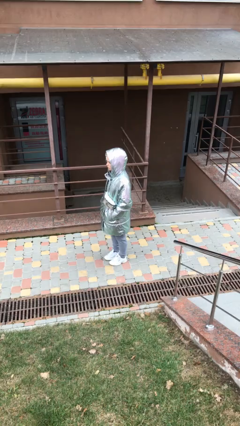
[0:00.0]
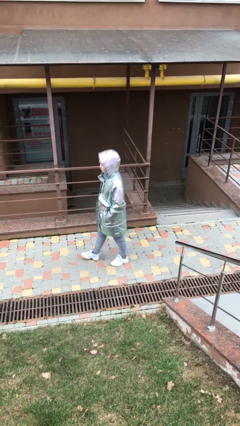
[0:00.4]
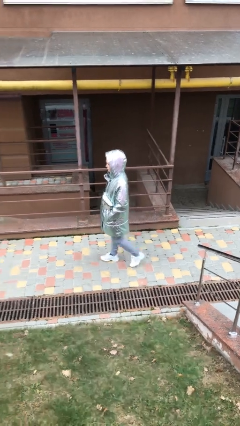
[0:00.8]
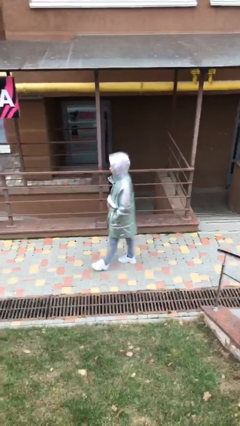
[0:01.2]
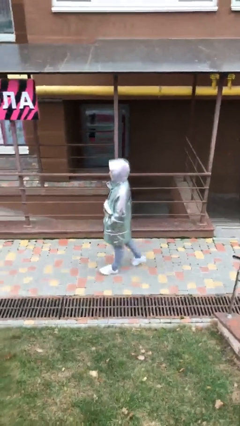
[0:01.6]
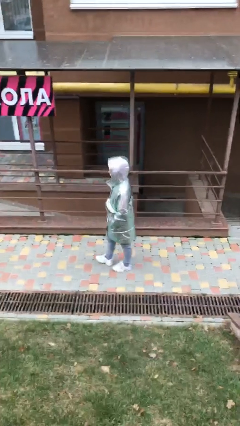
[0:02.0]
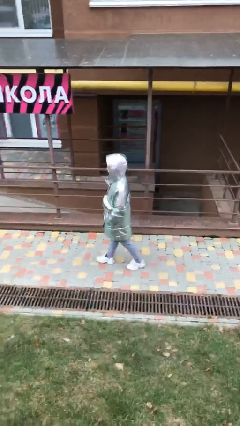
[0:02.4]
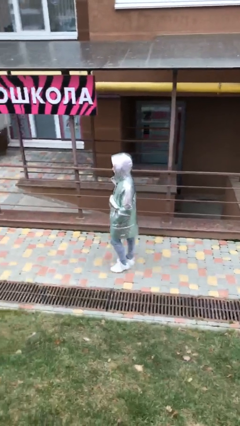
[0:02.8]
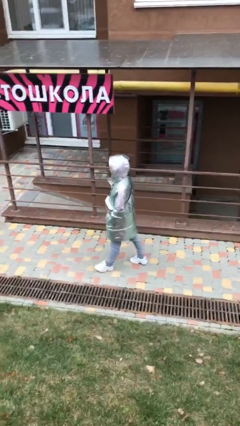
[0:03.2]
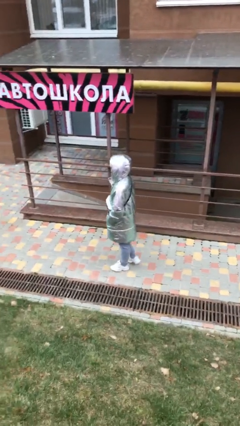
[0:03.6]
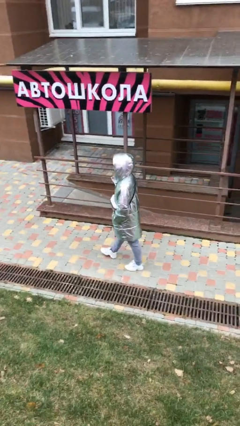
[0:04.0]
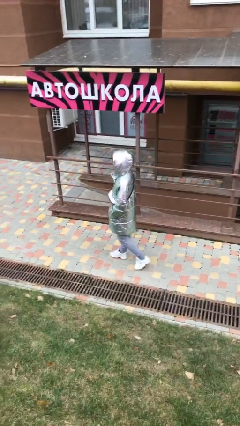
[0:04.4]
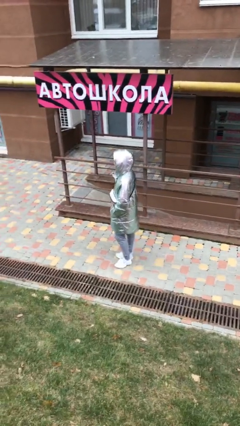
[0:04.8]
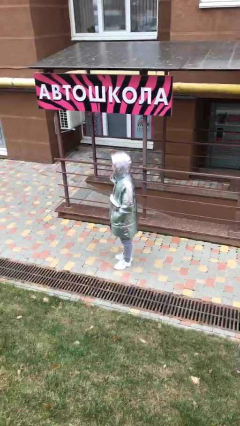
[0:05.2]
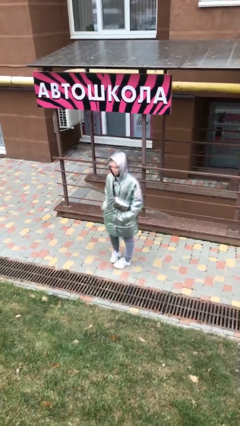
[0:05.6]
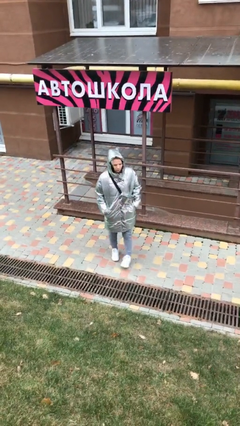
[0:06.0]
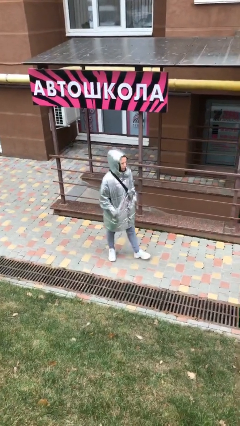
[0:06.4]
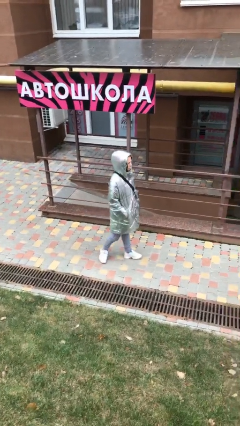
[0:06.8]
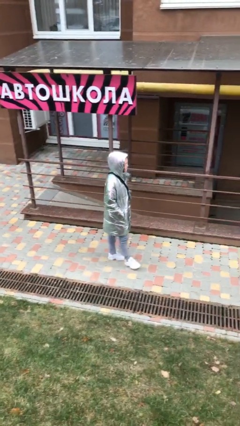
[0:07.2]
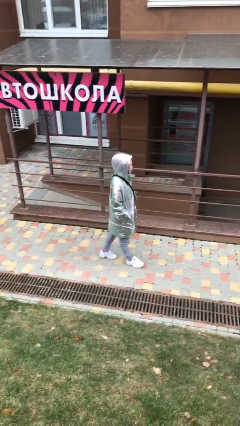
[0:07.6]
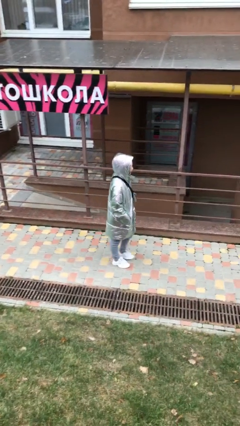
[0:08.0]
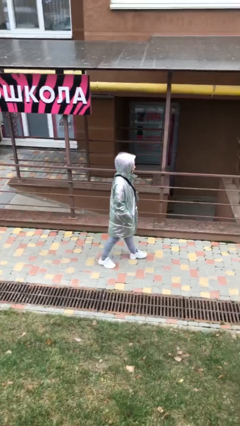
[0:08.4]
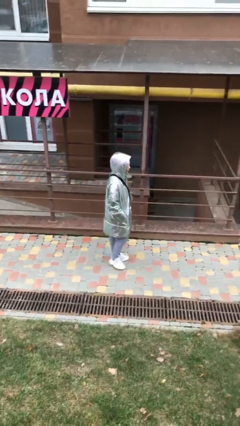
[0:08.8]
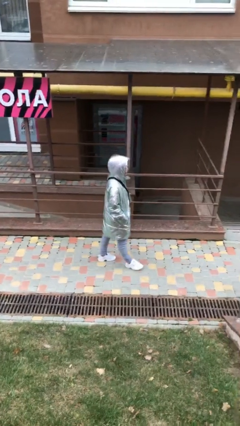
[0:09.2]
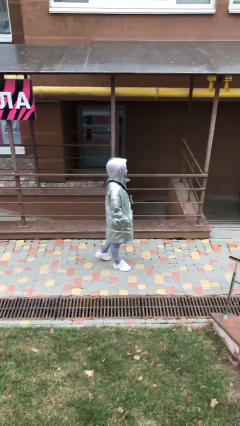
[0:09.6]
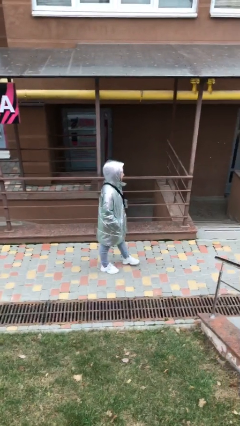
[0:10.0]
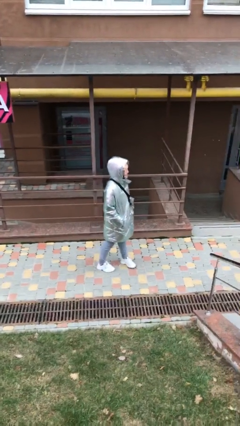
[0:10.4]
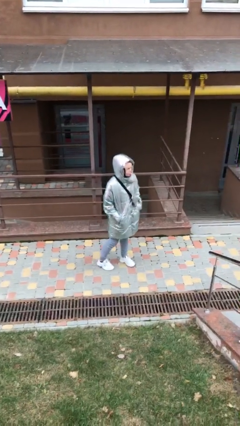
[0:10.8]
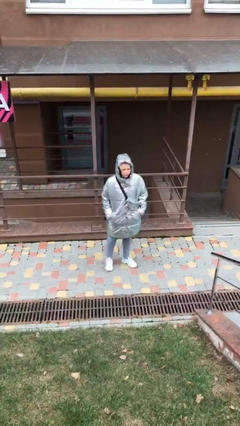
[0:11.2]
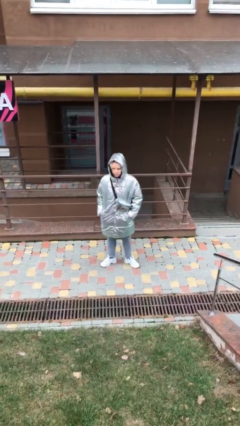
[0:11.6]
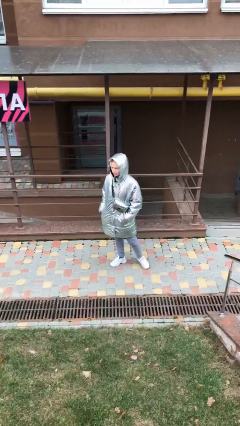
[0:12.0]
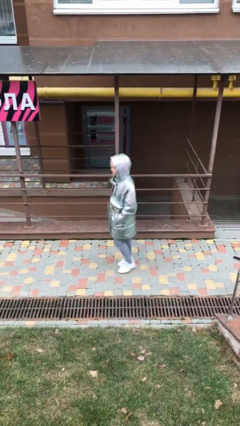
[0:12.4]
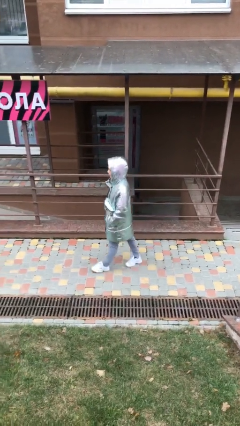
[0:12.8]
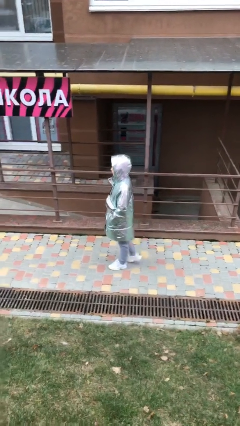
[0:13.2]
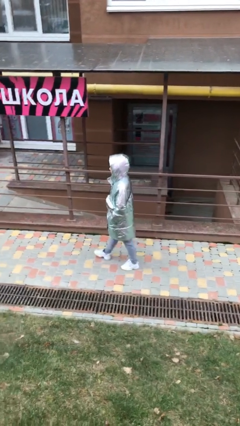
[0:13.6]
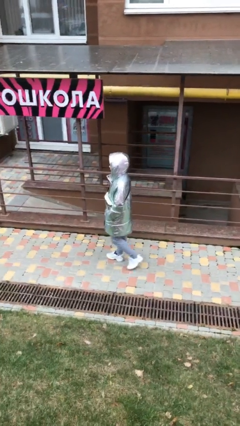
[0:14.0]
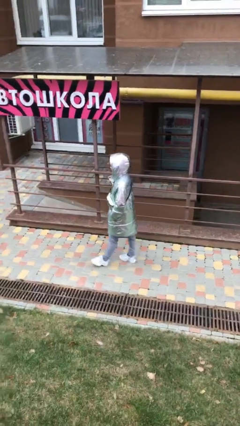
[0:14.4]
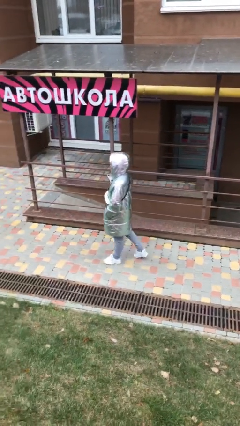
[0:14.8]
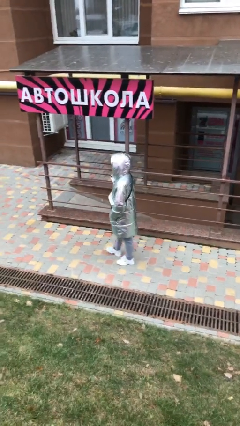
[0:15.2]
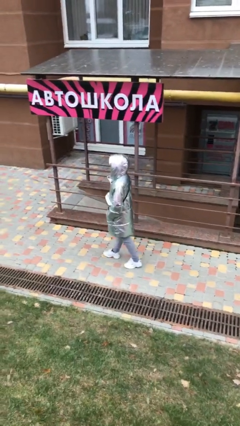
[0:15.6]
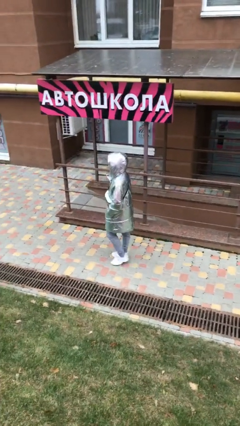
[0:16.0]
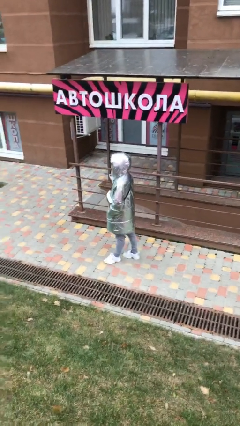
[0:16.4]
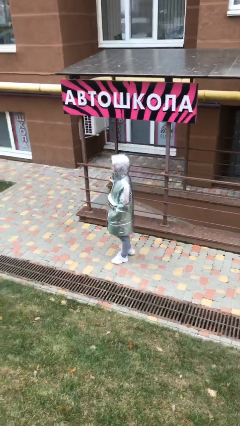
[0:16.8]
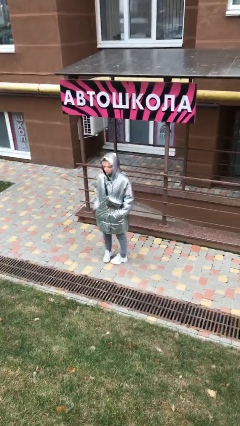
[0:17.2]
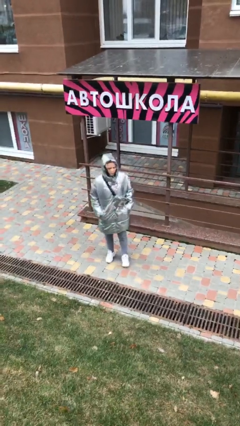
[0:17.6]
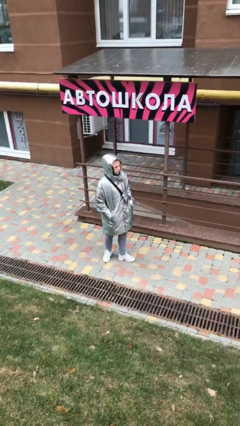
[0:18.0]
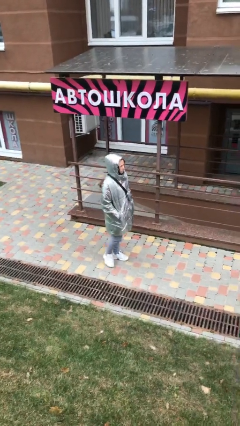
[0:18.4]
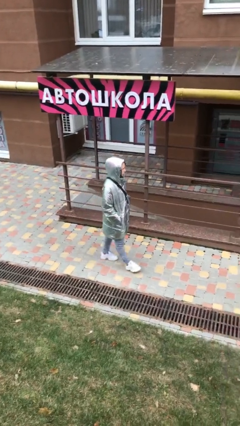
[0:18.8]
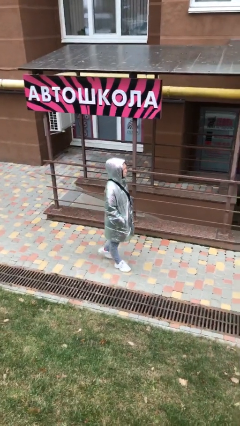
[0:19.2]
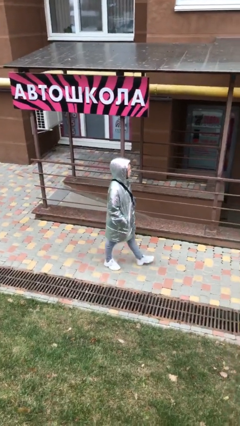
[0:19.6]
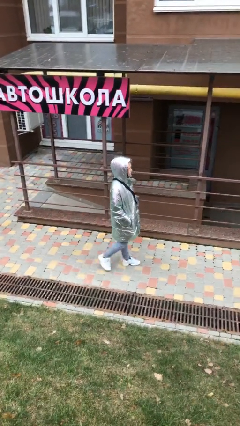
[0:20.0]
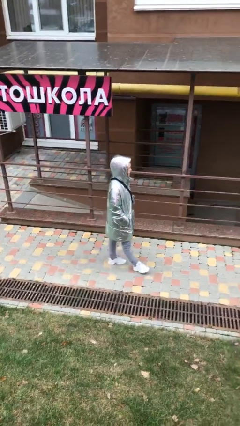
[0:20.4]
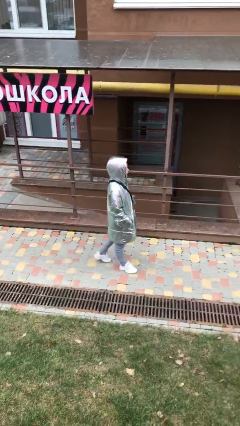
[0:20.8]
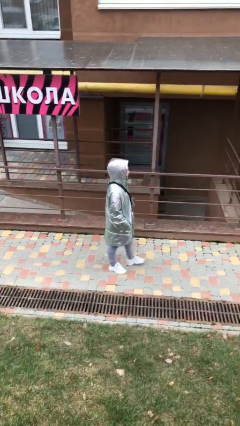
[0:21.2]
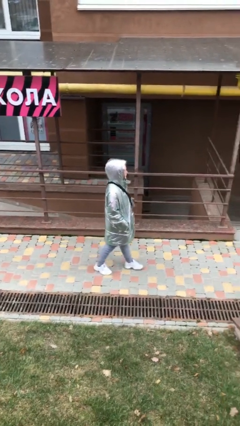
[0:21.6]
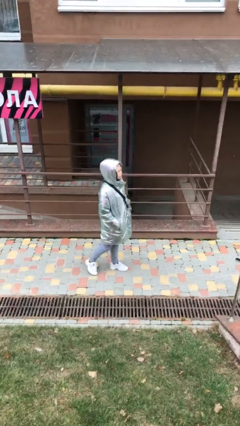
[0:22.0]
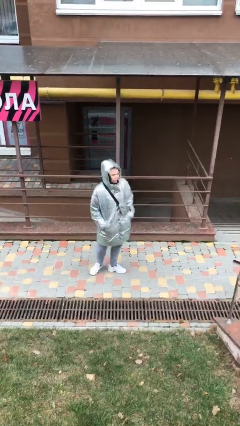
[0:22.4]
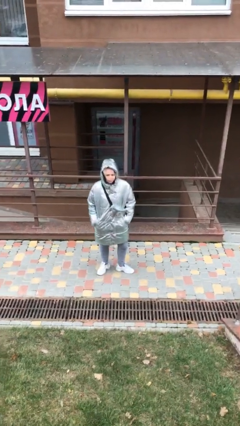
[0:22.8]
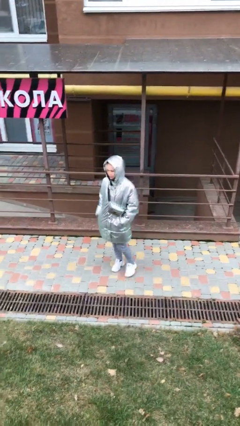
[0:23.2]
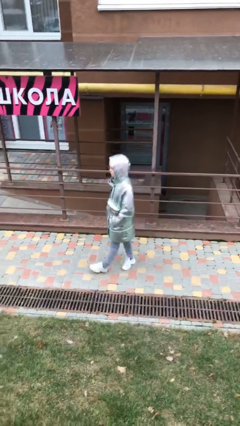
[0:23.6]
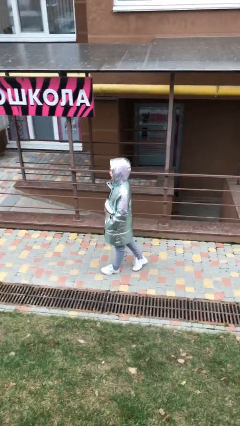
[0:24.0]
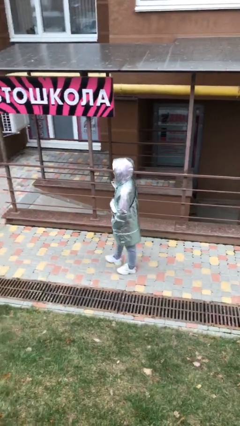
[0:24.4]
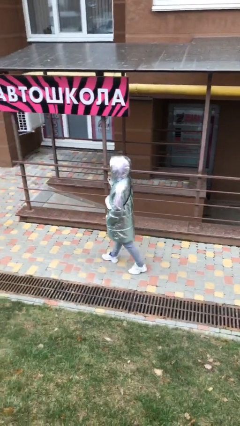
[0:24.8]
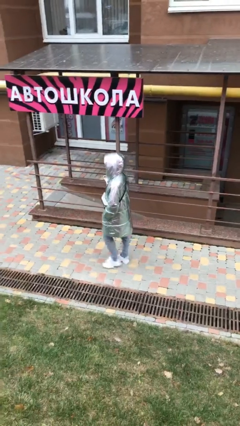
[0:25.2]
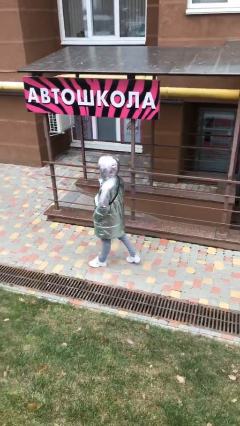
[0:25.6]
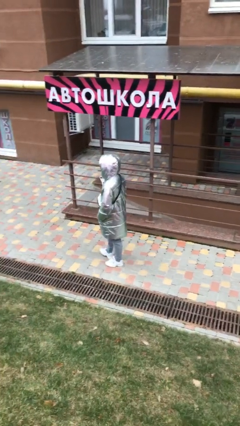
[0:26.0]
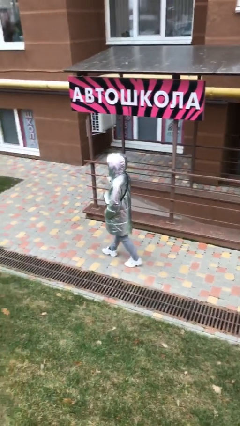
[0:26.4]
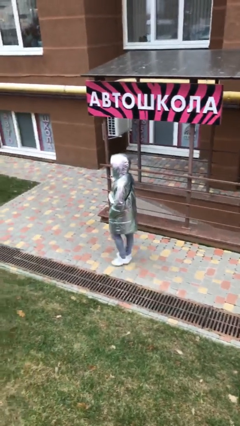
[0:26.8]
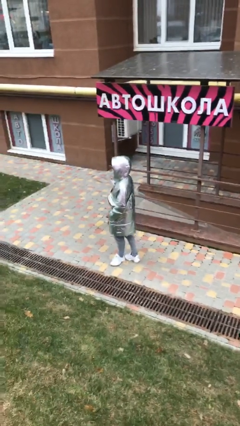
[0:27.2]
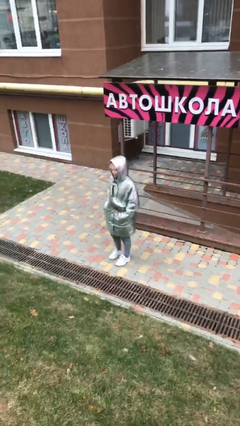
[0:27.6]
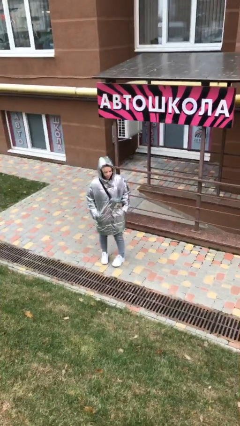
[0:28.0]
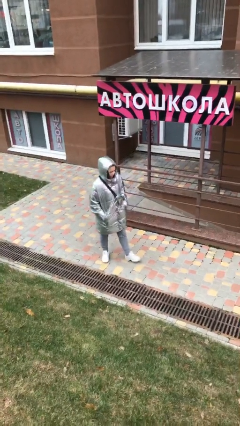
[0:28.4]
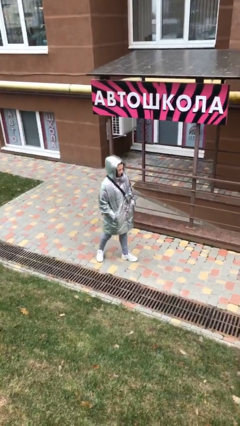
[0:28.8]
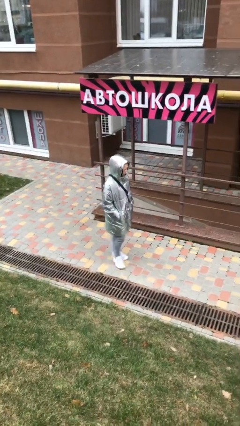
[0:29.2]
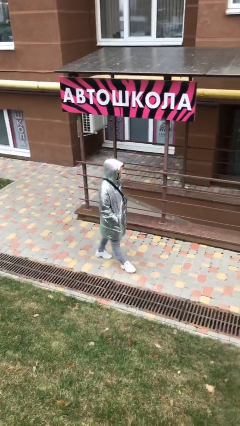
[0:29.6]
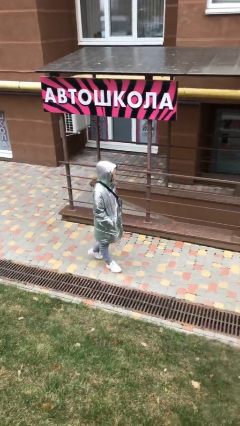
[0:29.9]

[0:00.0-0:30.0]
person walks

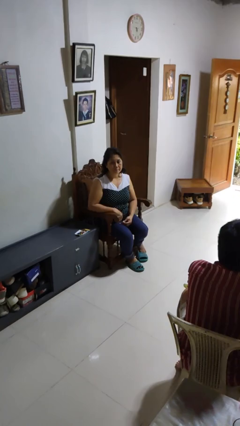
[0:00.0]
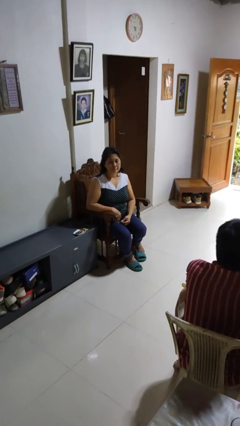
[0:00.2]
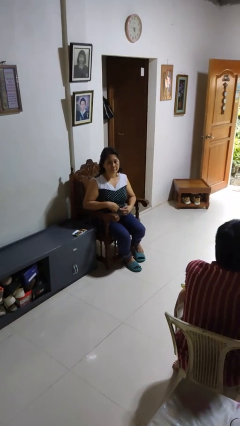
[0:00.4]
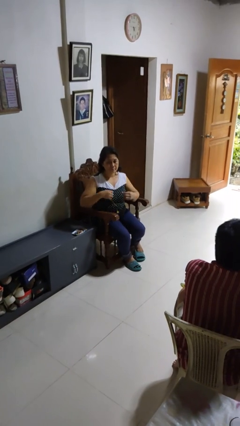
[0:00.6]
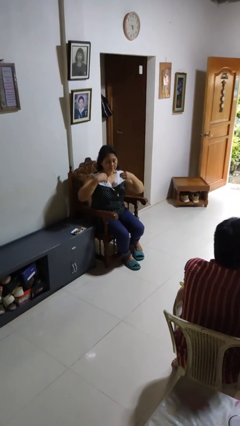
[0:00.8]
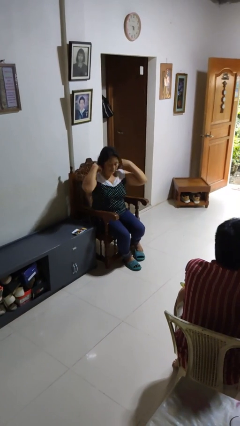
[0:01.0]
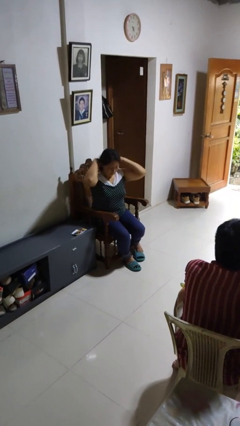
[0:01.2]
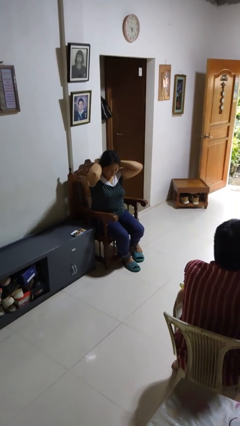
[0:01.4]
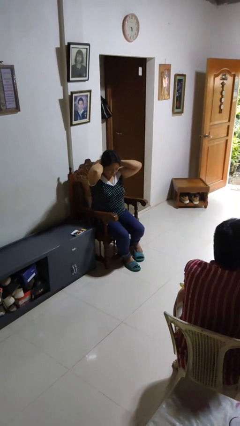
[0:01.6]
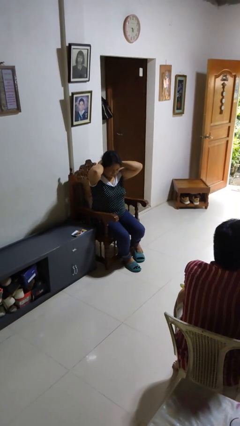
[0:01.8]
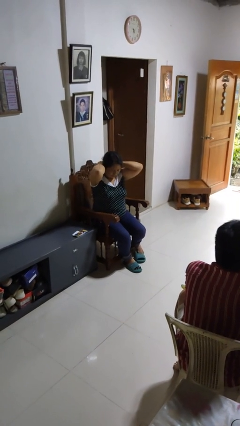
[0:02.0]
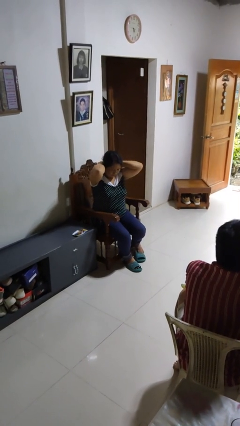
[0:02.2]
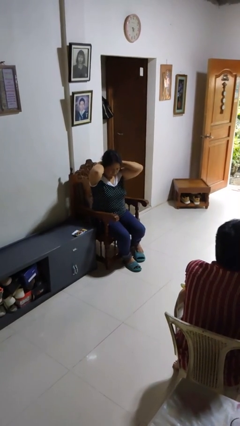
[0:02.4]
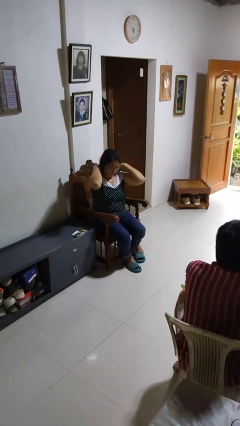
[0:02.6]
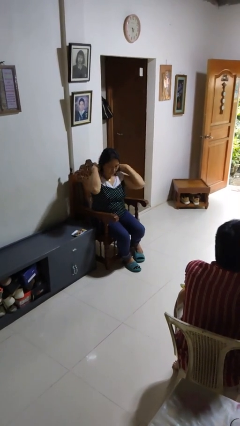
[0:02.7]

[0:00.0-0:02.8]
person puts on necklace

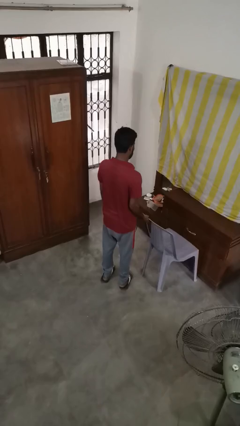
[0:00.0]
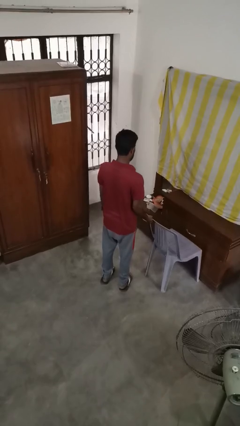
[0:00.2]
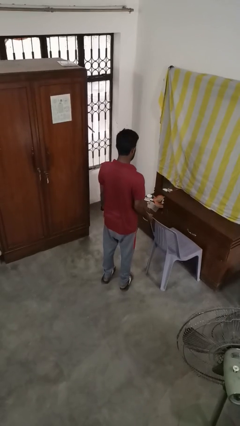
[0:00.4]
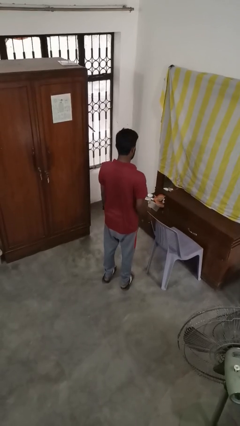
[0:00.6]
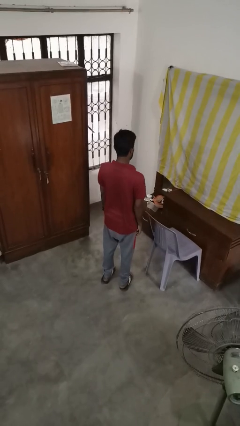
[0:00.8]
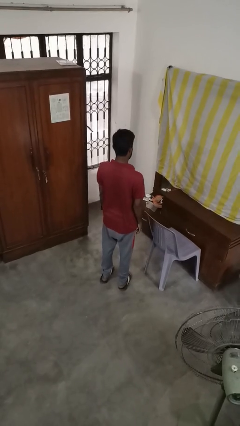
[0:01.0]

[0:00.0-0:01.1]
person pushes in chair
